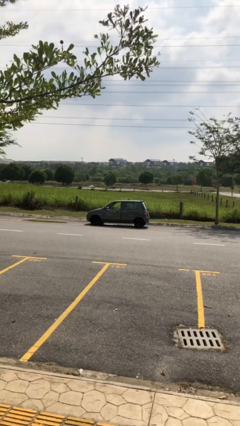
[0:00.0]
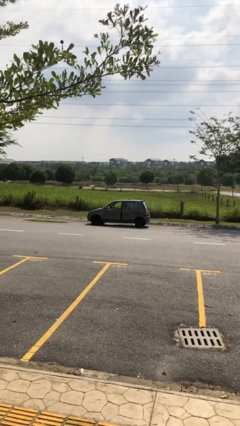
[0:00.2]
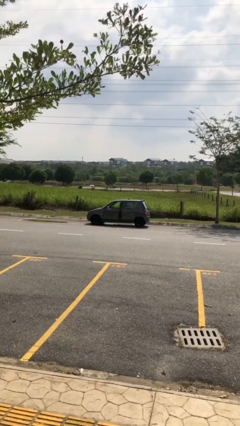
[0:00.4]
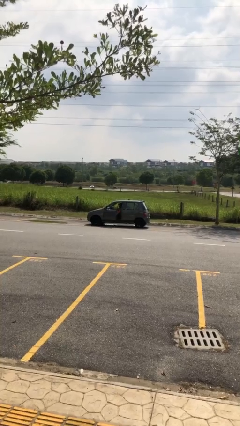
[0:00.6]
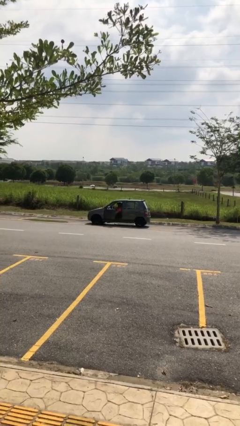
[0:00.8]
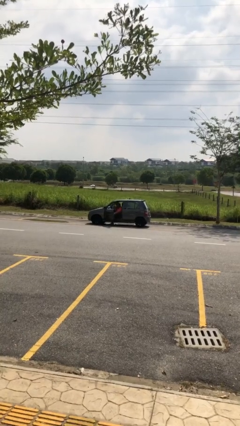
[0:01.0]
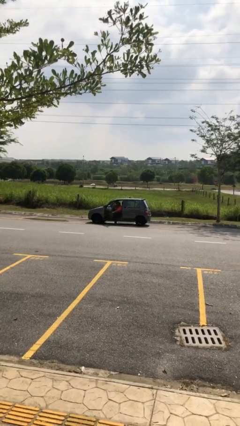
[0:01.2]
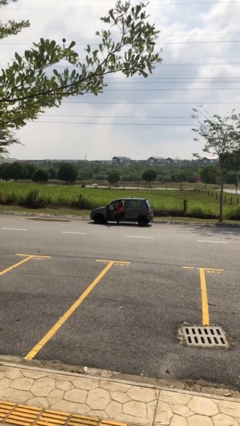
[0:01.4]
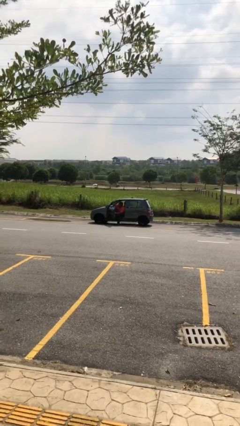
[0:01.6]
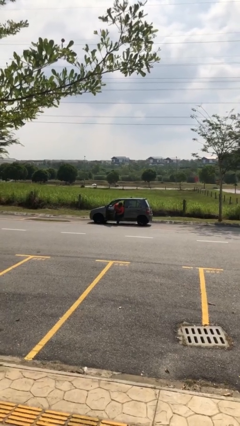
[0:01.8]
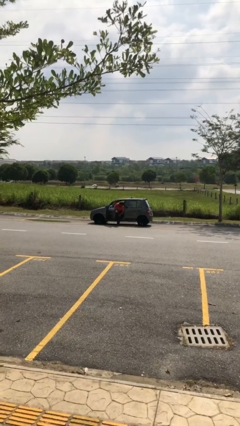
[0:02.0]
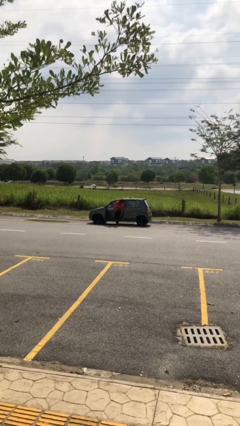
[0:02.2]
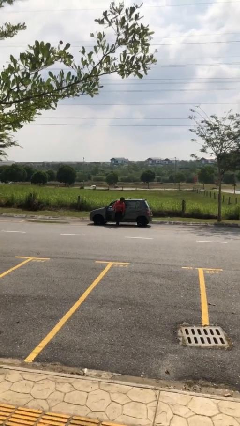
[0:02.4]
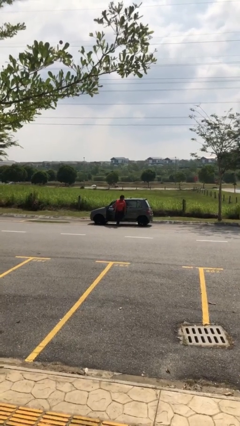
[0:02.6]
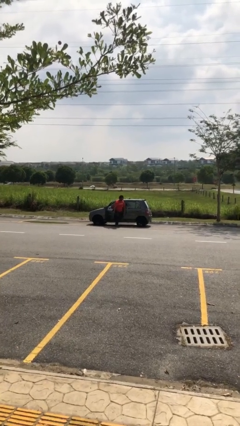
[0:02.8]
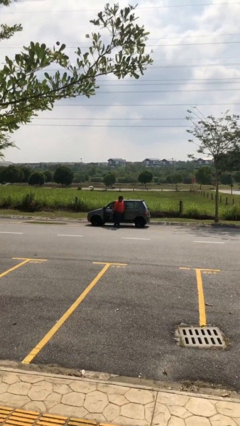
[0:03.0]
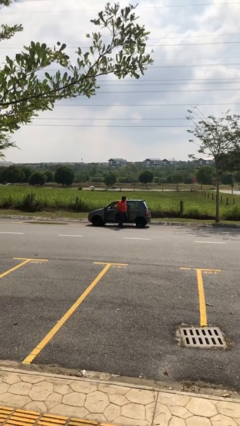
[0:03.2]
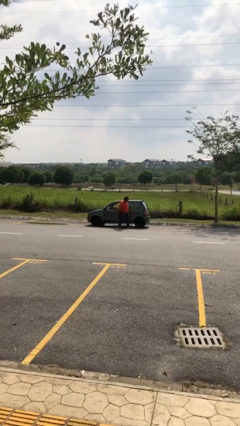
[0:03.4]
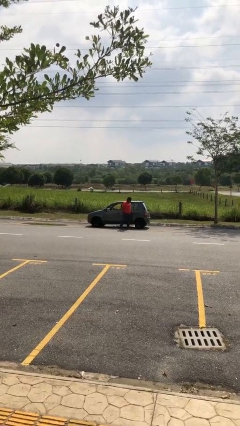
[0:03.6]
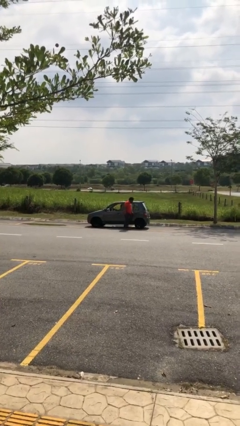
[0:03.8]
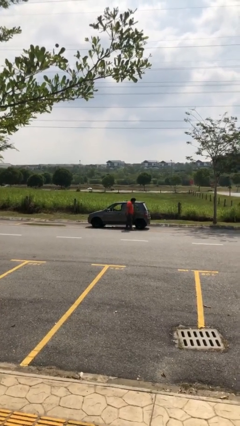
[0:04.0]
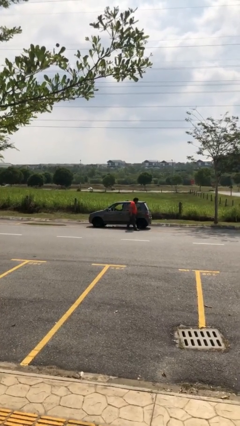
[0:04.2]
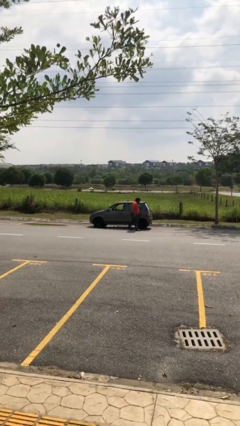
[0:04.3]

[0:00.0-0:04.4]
car drops off person

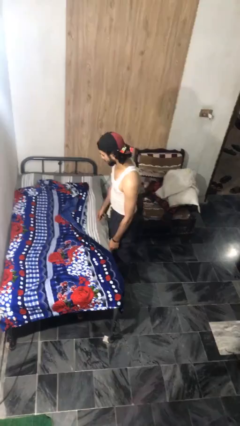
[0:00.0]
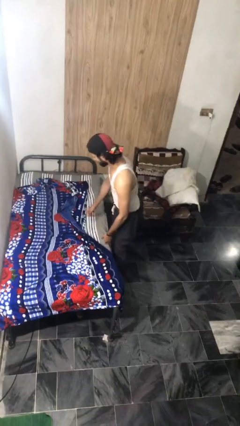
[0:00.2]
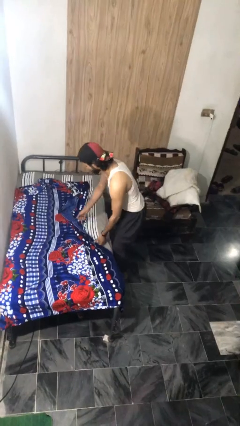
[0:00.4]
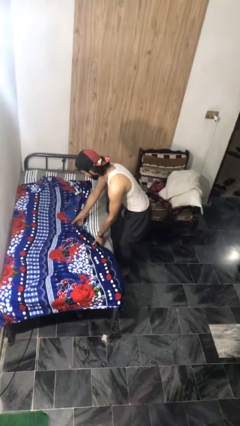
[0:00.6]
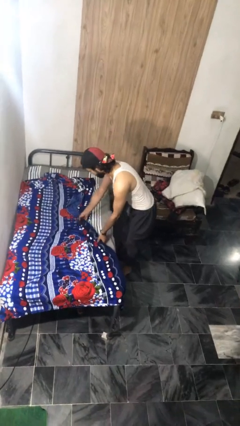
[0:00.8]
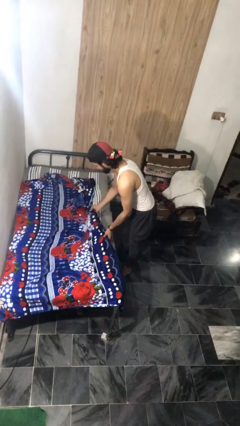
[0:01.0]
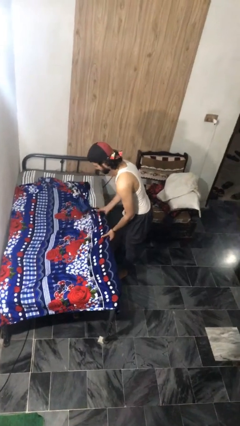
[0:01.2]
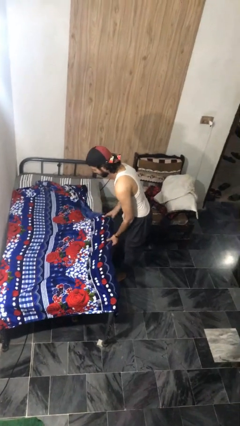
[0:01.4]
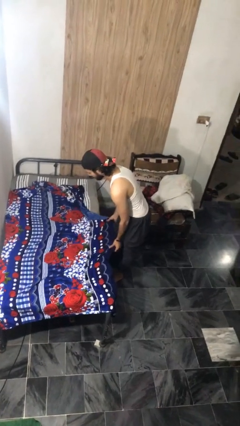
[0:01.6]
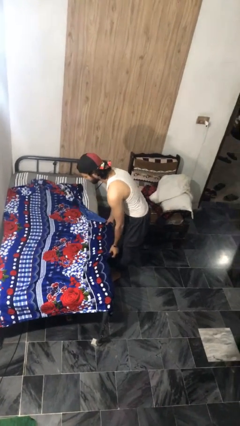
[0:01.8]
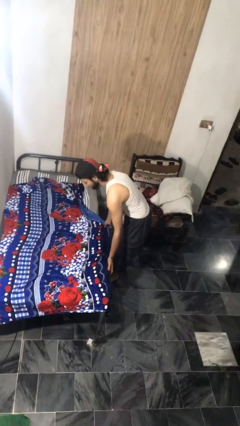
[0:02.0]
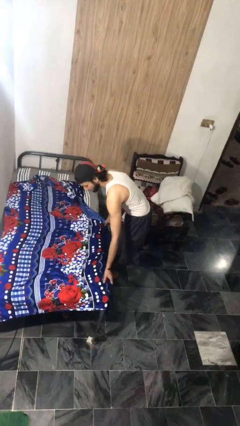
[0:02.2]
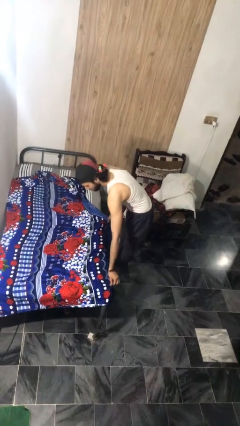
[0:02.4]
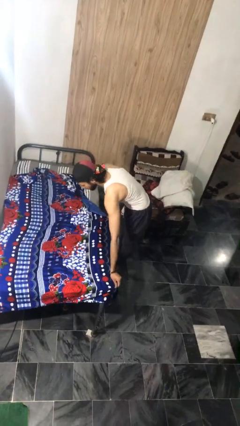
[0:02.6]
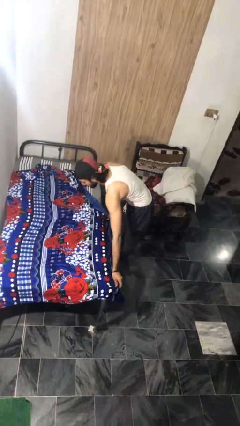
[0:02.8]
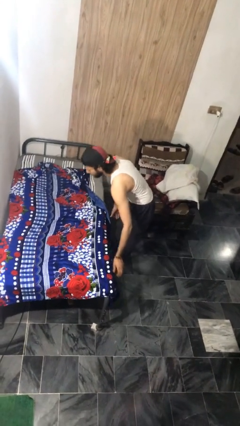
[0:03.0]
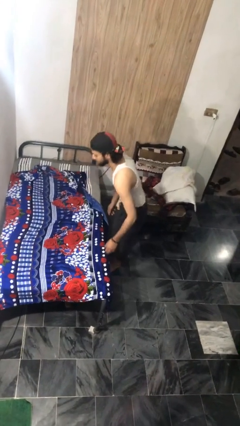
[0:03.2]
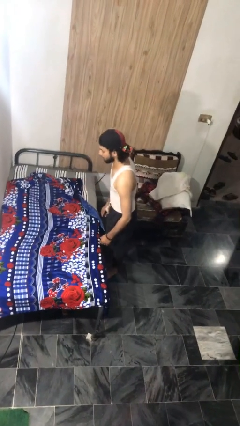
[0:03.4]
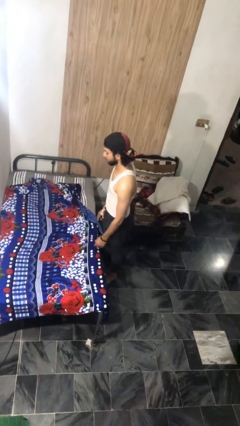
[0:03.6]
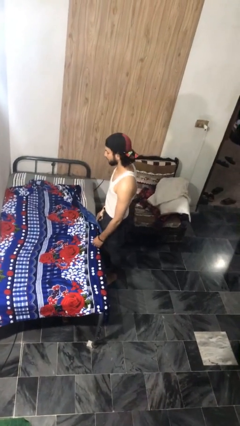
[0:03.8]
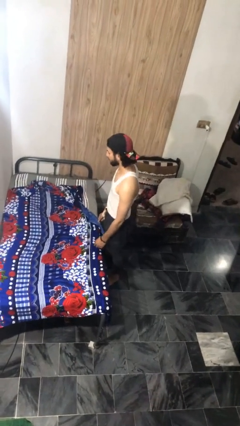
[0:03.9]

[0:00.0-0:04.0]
person makes bed

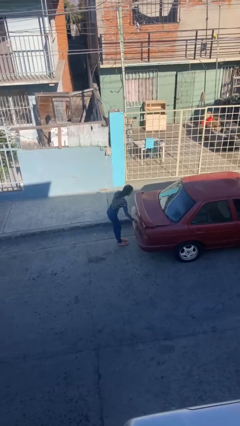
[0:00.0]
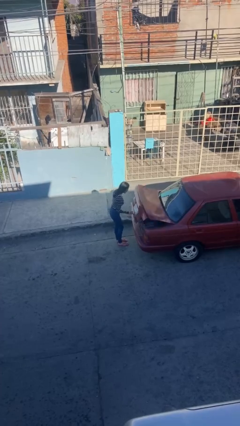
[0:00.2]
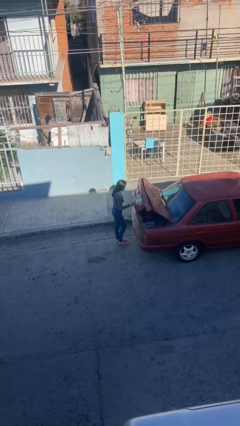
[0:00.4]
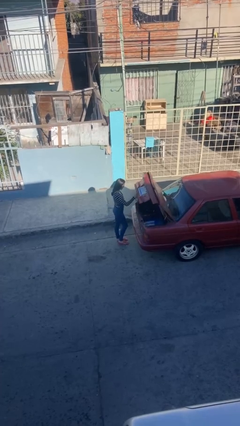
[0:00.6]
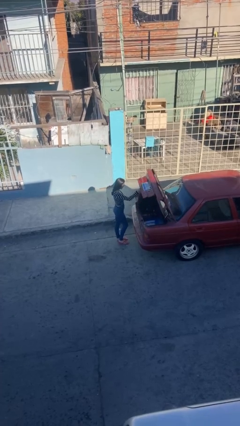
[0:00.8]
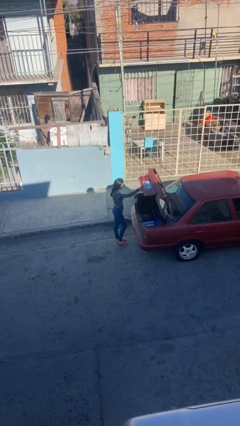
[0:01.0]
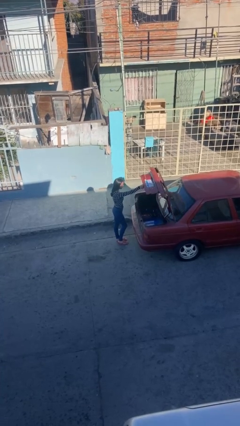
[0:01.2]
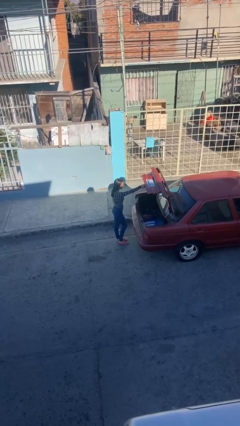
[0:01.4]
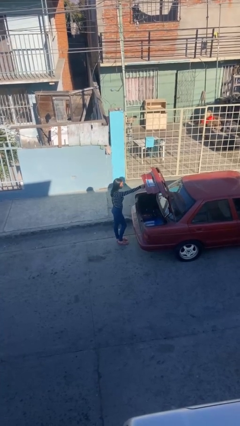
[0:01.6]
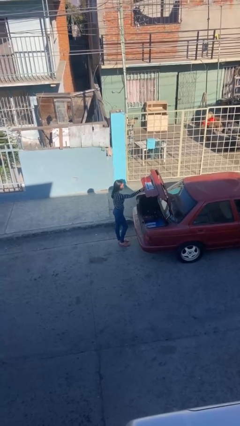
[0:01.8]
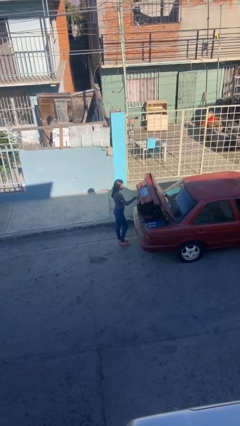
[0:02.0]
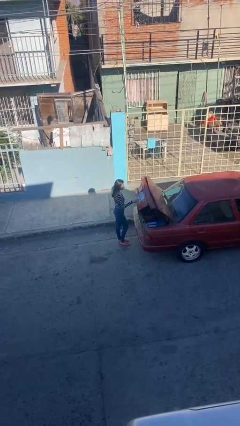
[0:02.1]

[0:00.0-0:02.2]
person opens car trunk

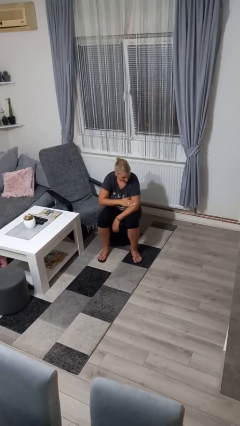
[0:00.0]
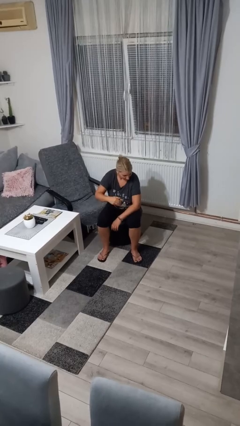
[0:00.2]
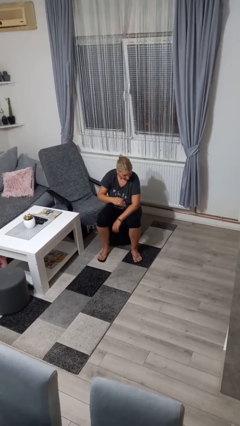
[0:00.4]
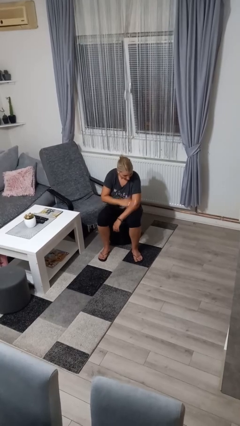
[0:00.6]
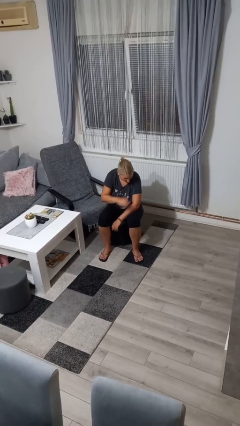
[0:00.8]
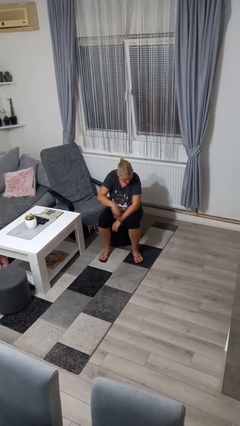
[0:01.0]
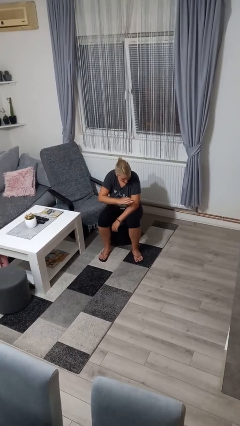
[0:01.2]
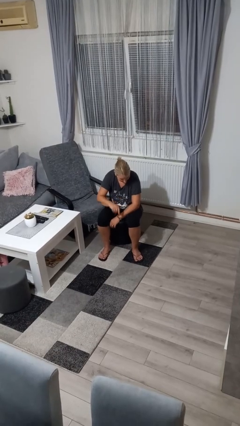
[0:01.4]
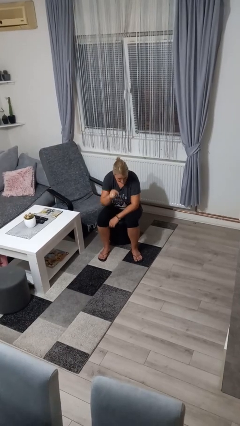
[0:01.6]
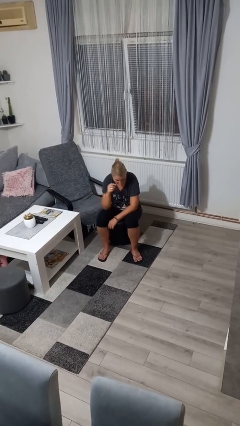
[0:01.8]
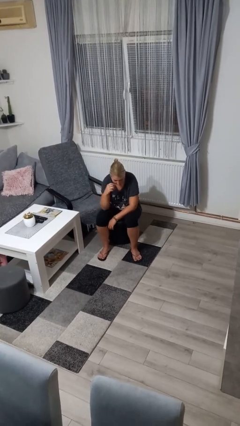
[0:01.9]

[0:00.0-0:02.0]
person swats bug

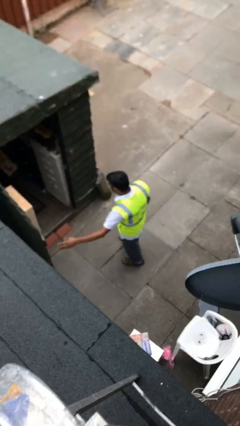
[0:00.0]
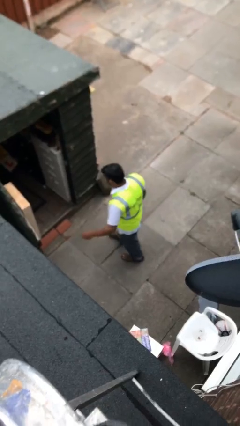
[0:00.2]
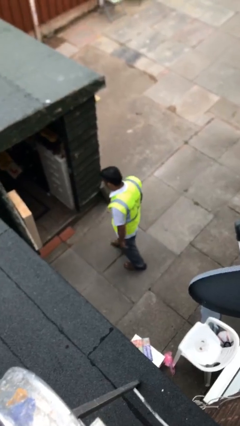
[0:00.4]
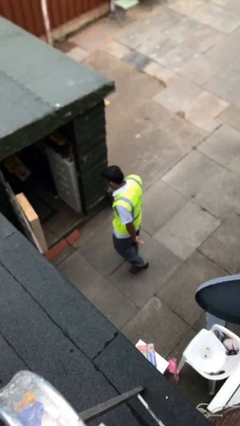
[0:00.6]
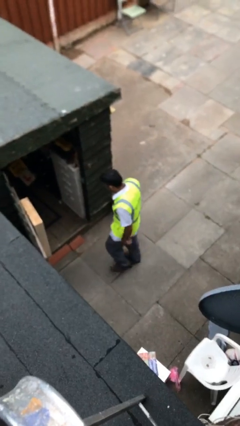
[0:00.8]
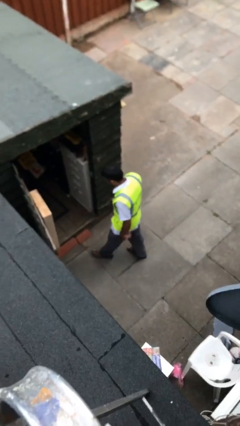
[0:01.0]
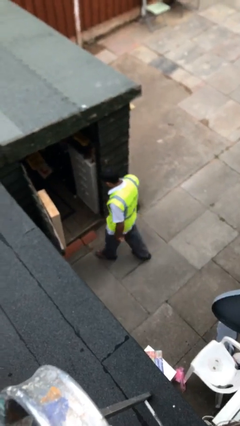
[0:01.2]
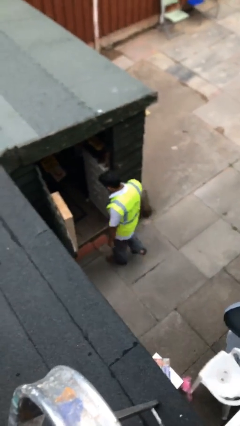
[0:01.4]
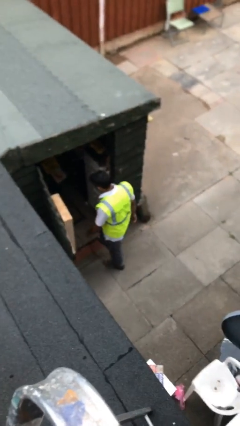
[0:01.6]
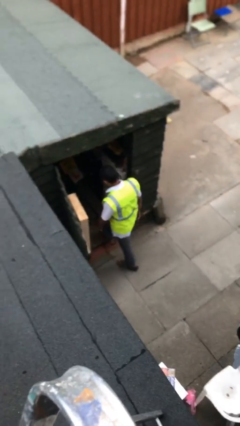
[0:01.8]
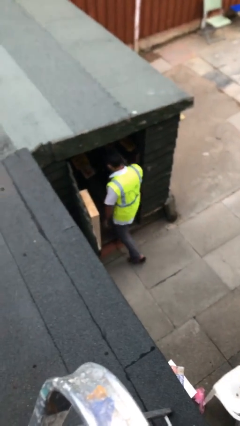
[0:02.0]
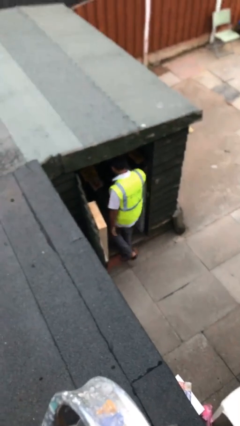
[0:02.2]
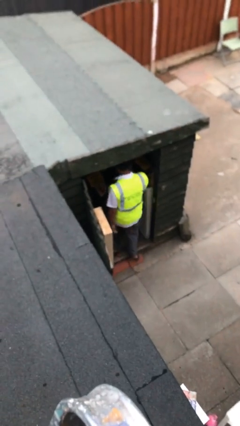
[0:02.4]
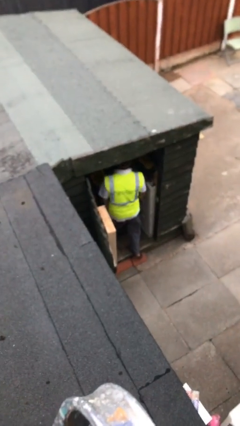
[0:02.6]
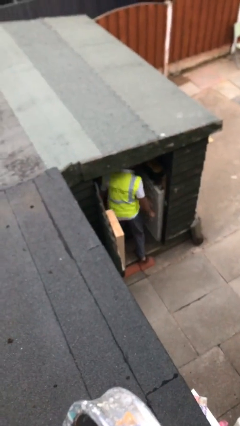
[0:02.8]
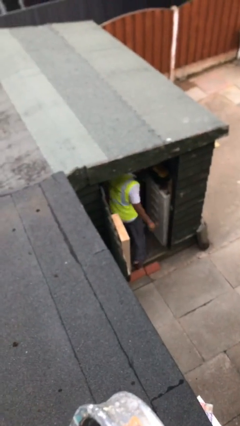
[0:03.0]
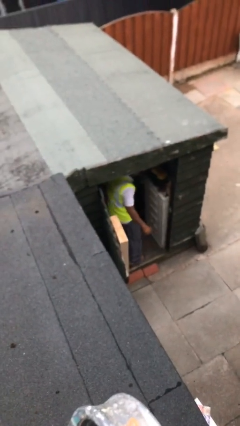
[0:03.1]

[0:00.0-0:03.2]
person exits scene through structure

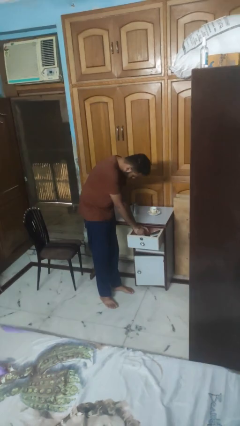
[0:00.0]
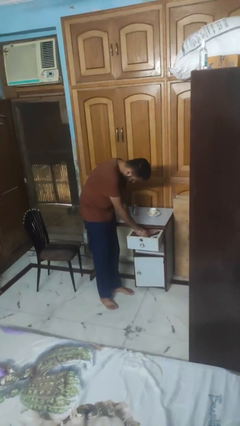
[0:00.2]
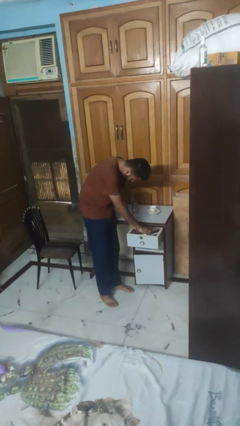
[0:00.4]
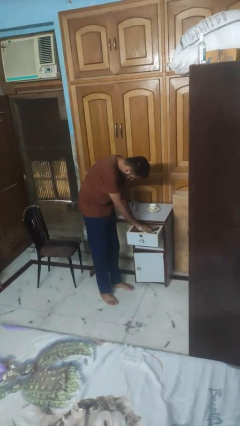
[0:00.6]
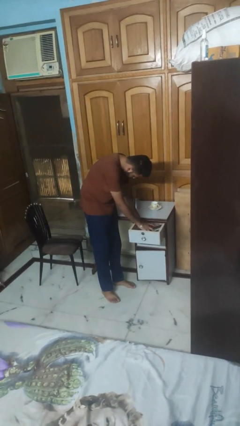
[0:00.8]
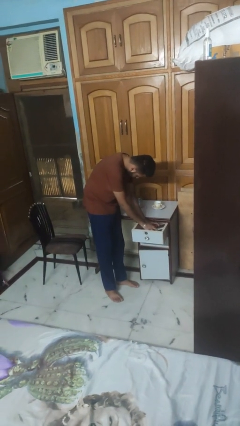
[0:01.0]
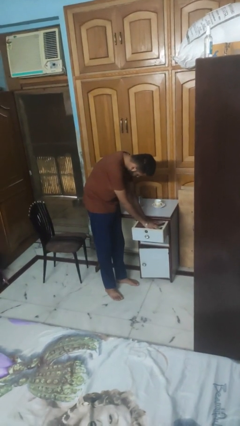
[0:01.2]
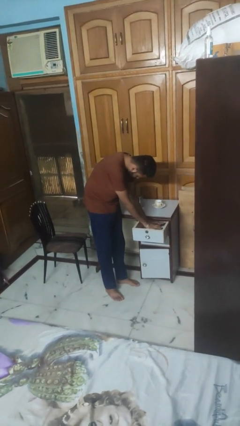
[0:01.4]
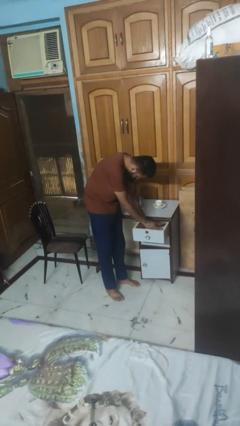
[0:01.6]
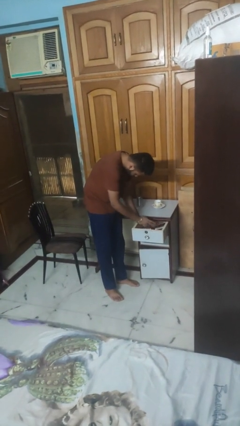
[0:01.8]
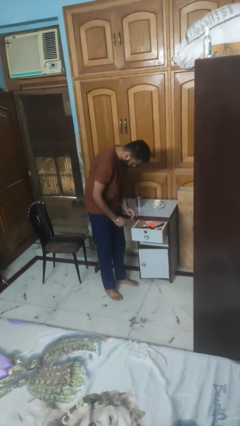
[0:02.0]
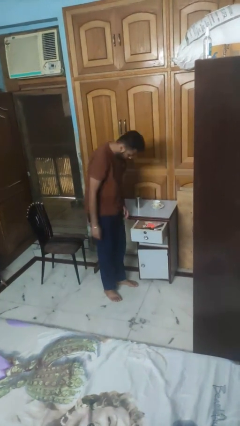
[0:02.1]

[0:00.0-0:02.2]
person searches in kitchen drawer
